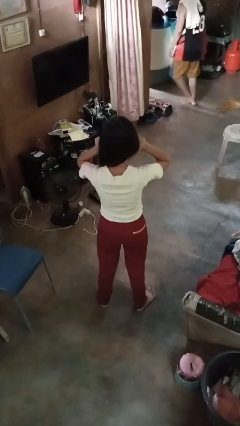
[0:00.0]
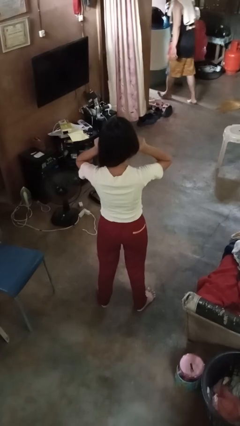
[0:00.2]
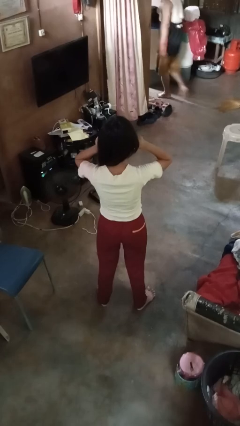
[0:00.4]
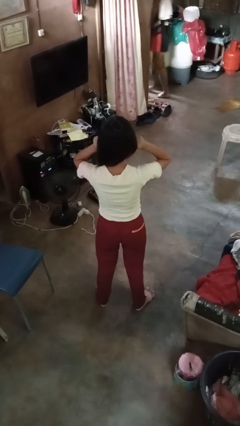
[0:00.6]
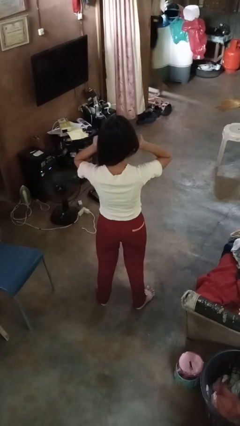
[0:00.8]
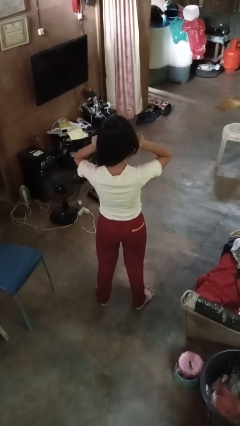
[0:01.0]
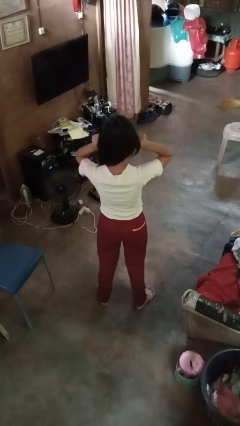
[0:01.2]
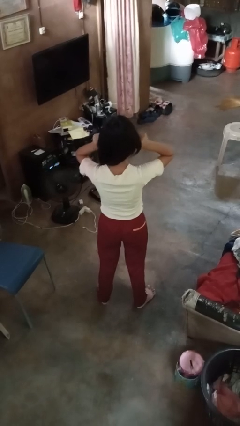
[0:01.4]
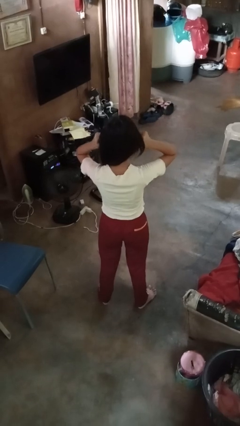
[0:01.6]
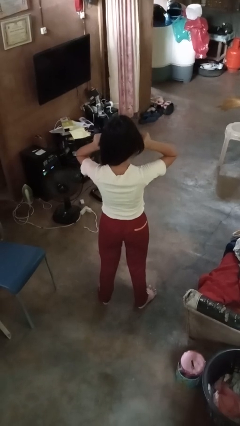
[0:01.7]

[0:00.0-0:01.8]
person touches earlobe

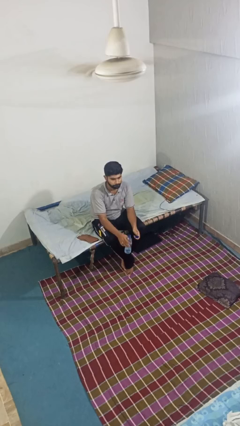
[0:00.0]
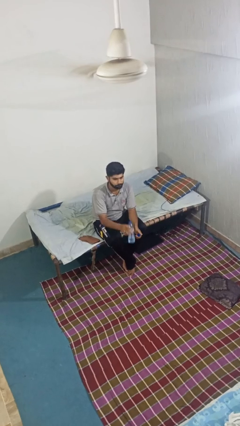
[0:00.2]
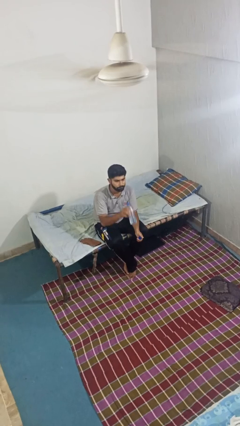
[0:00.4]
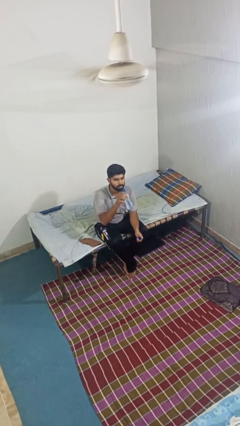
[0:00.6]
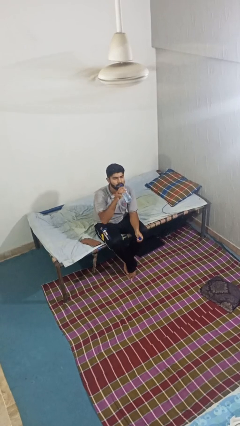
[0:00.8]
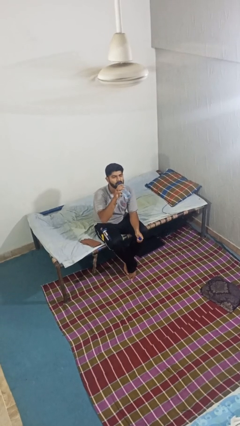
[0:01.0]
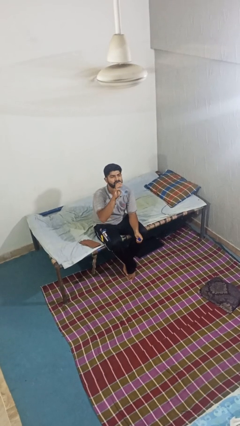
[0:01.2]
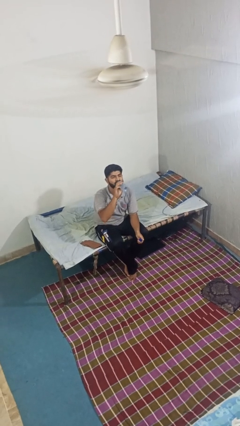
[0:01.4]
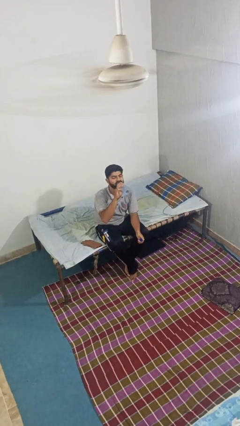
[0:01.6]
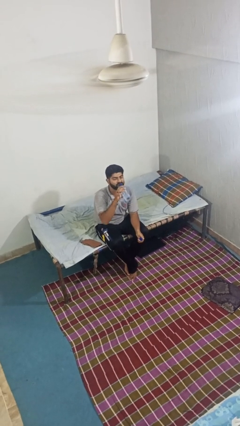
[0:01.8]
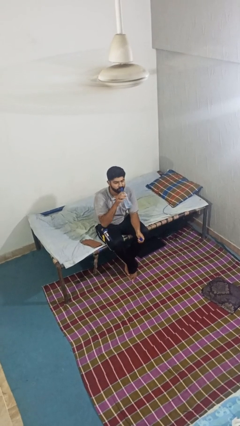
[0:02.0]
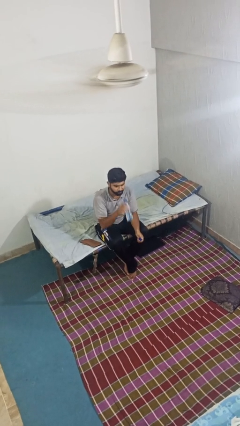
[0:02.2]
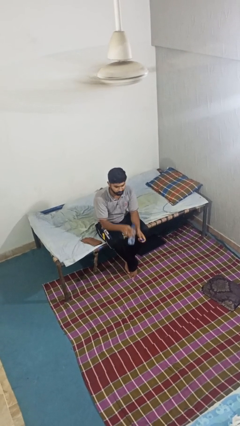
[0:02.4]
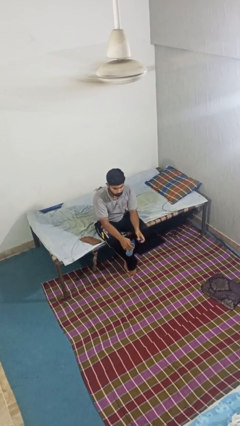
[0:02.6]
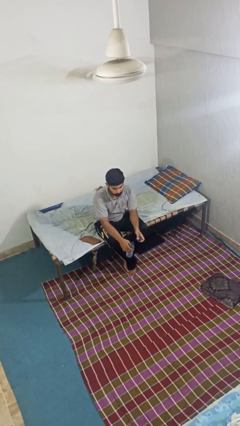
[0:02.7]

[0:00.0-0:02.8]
person drinks from bottle

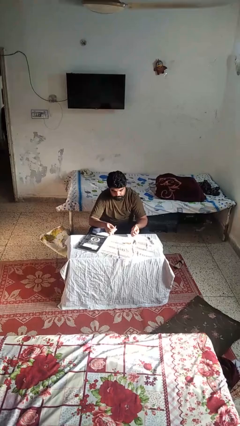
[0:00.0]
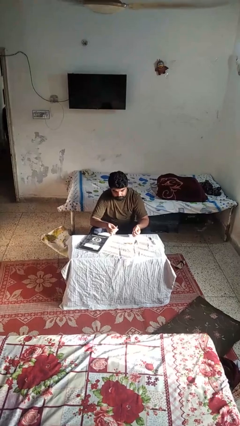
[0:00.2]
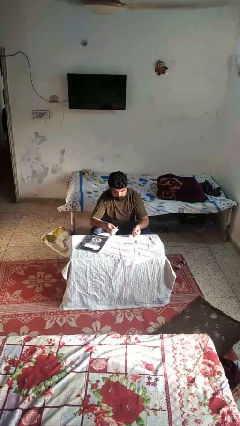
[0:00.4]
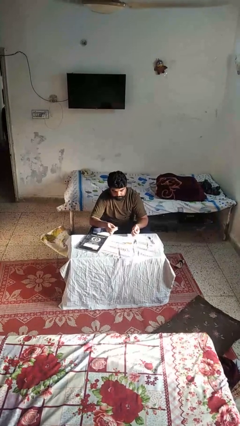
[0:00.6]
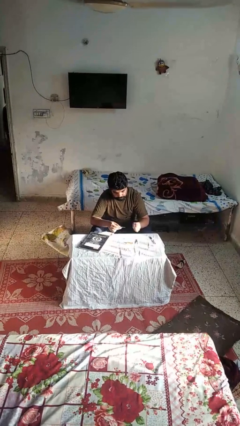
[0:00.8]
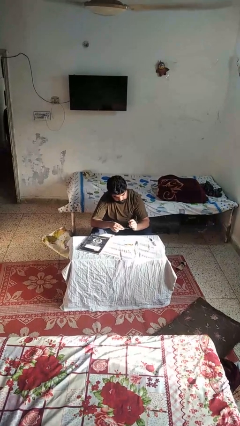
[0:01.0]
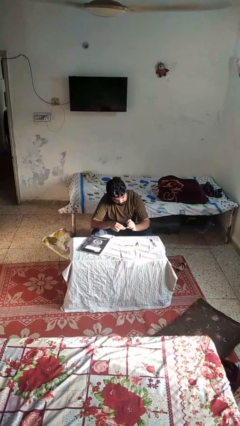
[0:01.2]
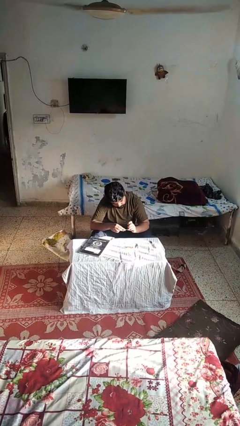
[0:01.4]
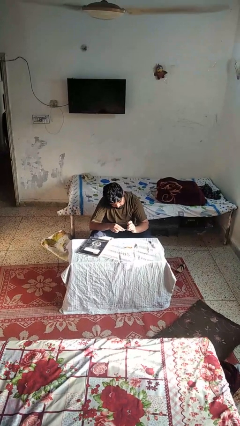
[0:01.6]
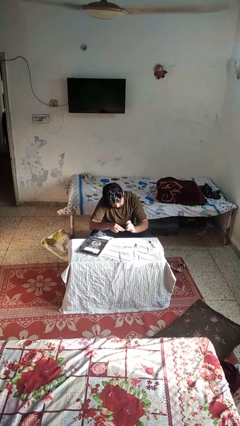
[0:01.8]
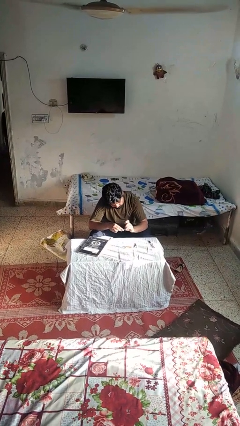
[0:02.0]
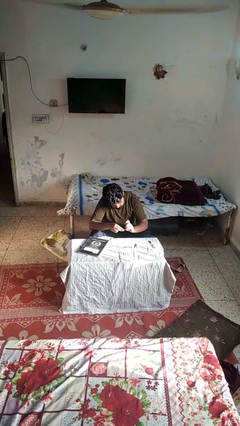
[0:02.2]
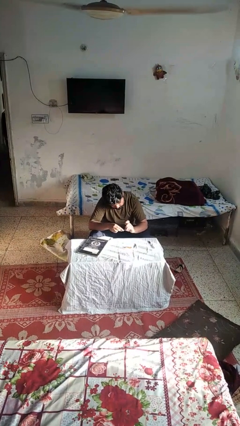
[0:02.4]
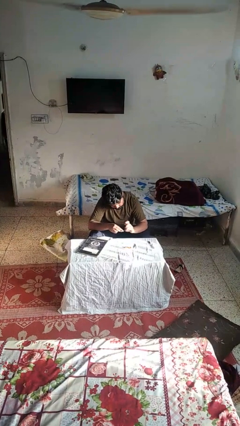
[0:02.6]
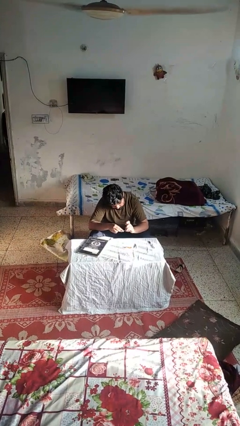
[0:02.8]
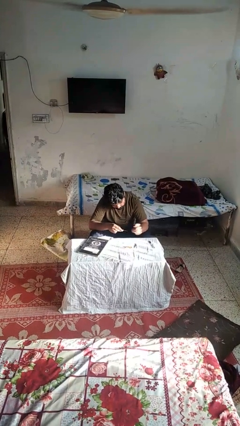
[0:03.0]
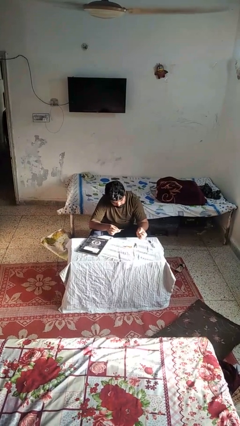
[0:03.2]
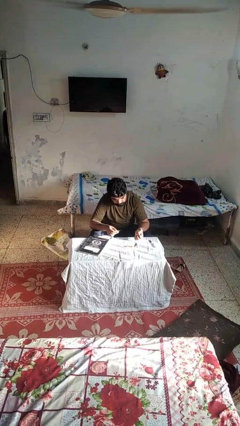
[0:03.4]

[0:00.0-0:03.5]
person files fingernails

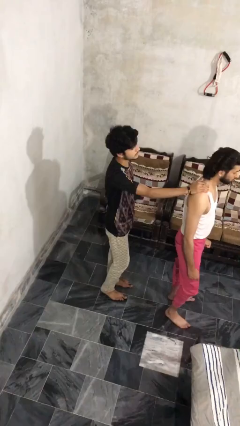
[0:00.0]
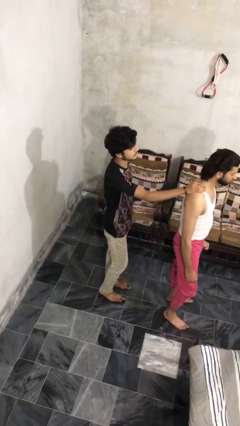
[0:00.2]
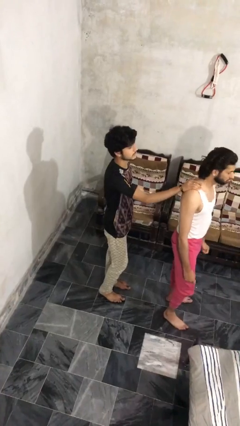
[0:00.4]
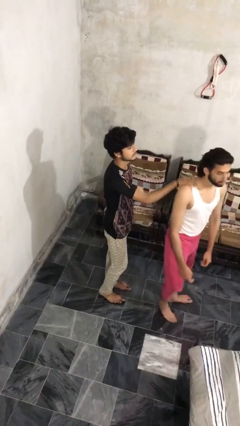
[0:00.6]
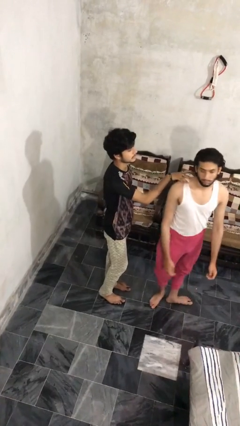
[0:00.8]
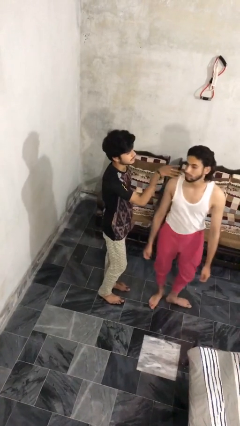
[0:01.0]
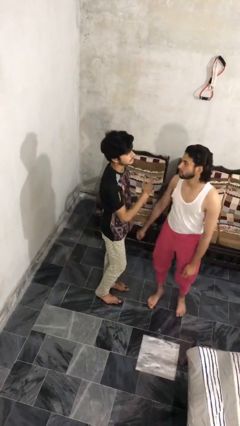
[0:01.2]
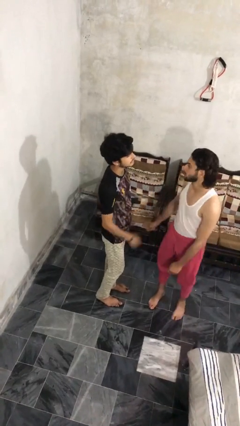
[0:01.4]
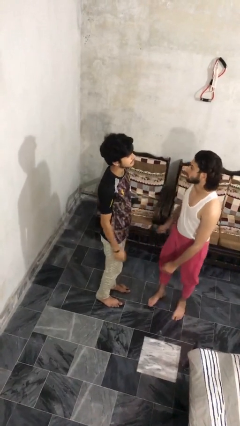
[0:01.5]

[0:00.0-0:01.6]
person spins person around

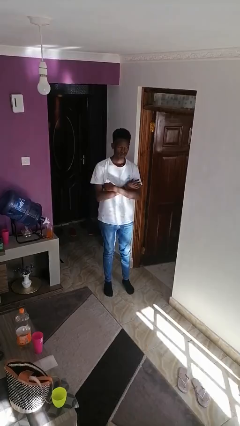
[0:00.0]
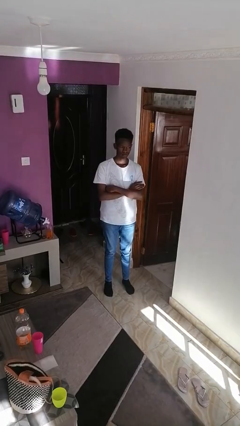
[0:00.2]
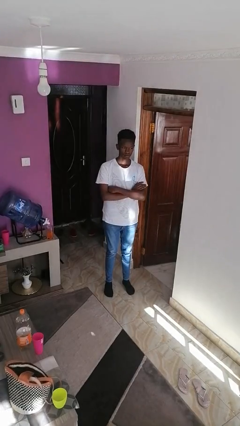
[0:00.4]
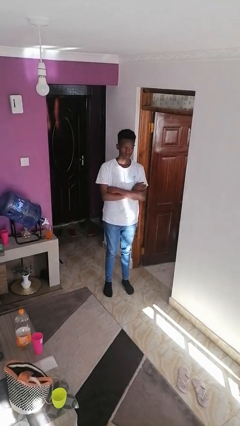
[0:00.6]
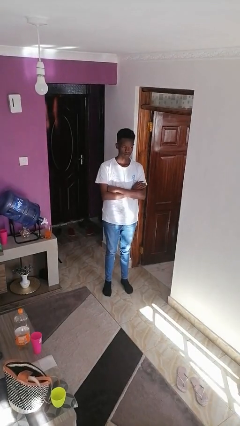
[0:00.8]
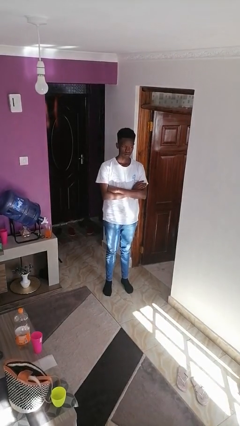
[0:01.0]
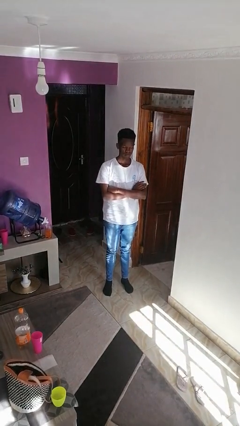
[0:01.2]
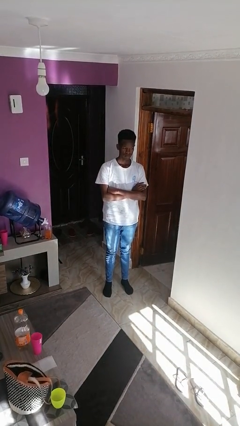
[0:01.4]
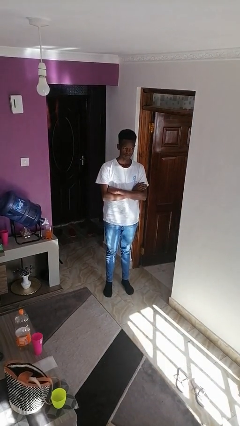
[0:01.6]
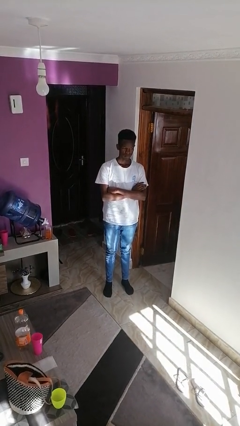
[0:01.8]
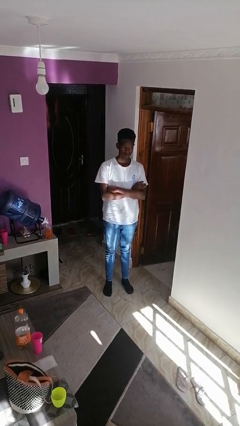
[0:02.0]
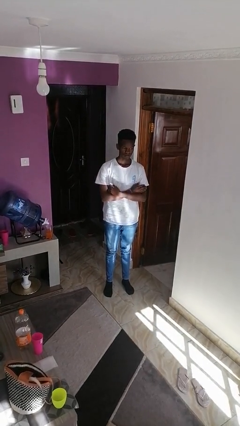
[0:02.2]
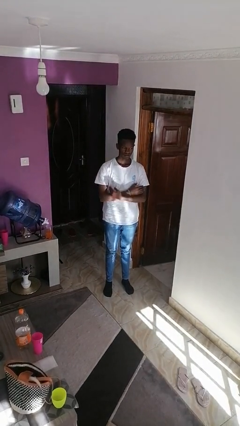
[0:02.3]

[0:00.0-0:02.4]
person crosses arms

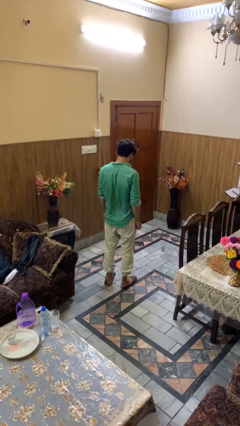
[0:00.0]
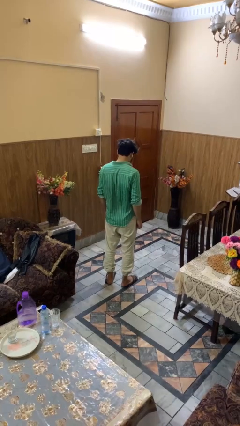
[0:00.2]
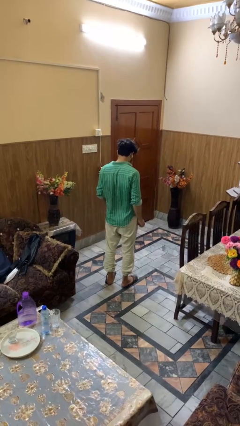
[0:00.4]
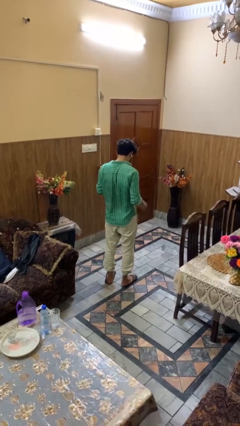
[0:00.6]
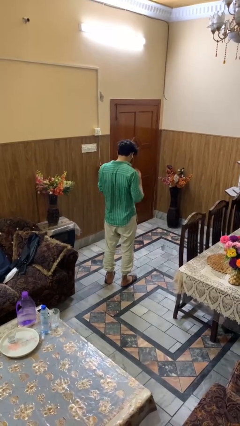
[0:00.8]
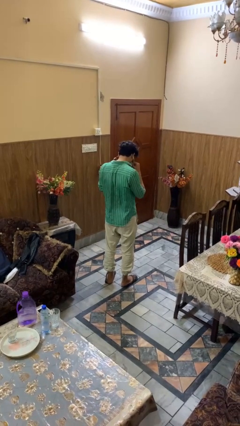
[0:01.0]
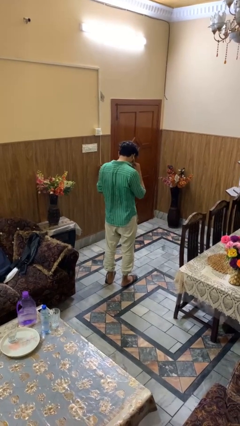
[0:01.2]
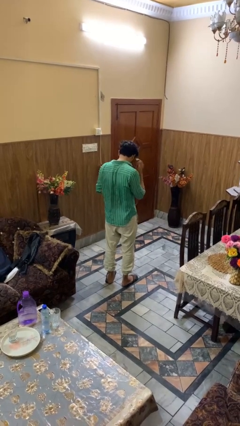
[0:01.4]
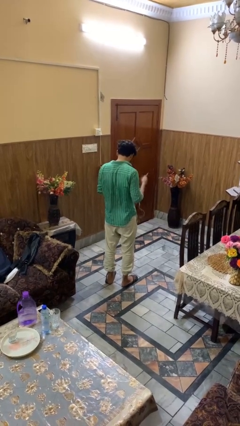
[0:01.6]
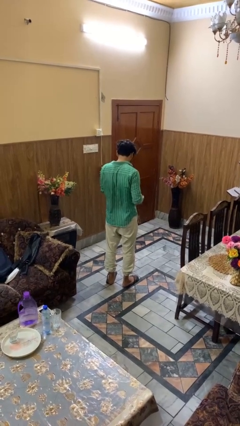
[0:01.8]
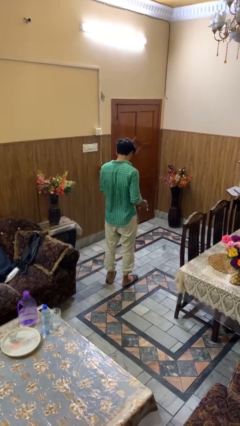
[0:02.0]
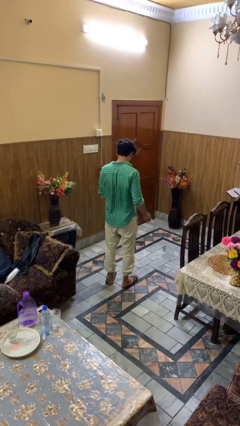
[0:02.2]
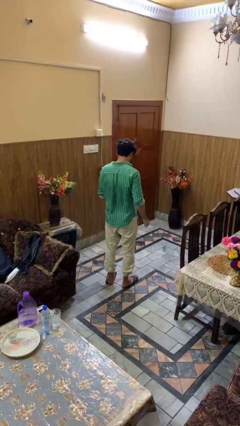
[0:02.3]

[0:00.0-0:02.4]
person takes off headphones

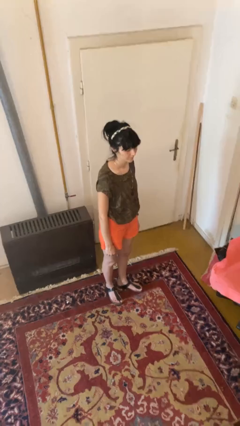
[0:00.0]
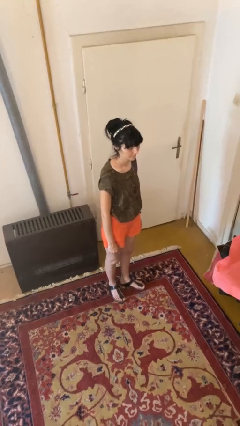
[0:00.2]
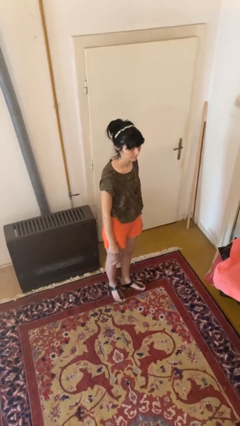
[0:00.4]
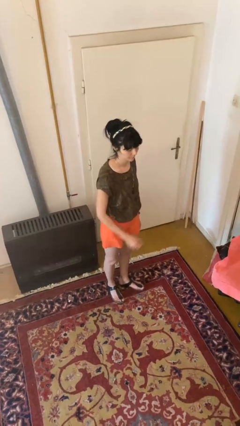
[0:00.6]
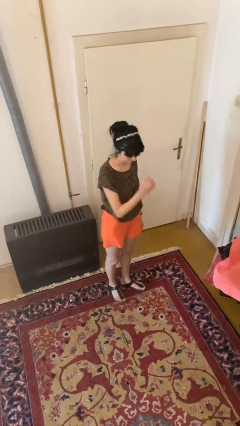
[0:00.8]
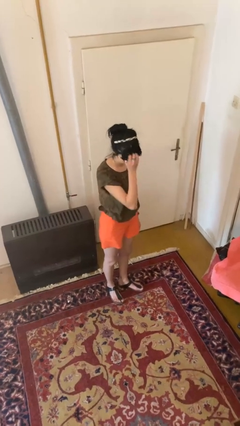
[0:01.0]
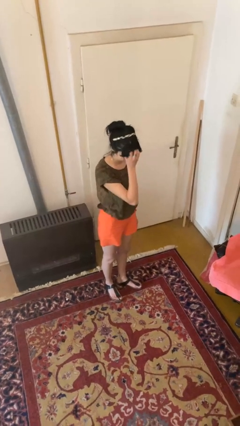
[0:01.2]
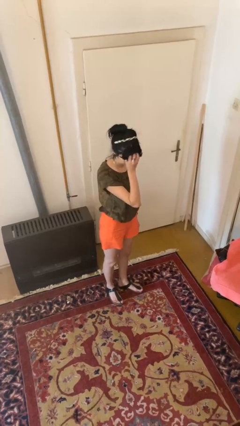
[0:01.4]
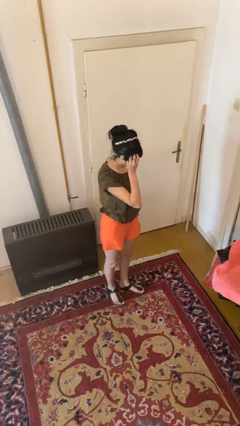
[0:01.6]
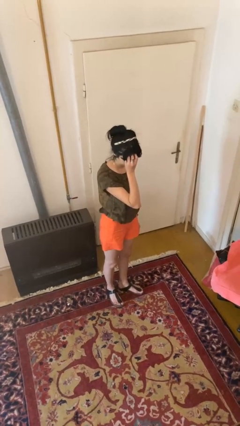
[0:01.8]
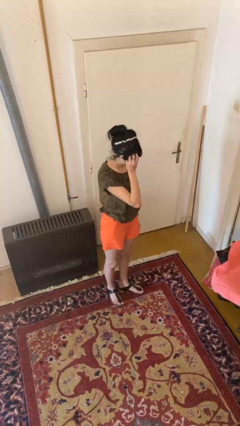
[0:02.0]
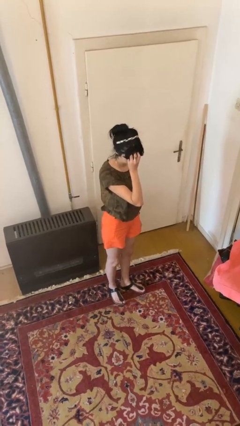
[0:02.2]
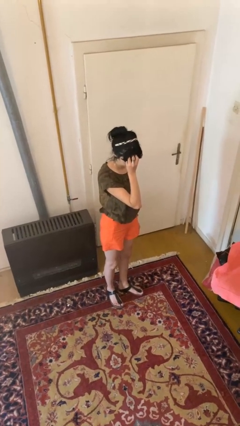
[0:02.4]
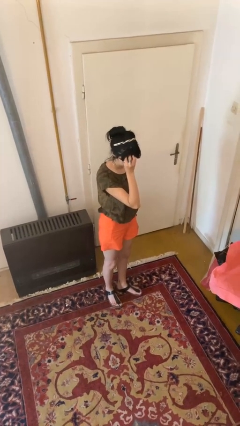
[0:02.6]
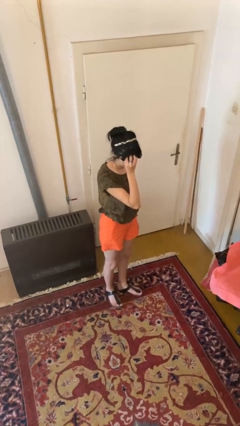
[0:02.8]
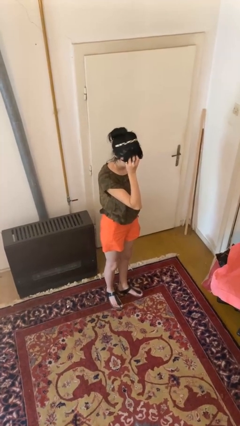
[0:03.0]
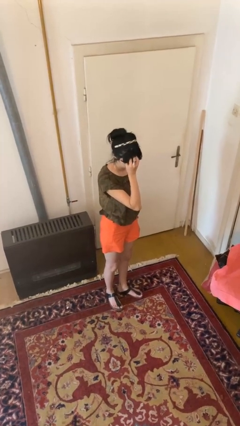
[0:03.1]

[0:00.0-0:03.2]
person scratches face
